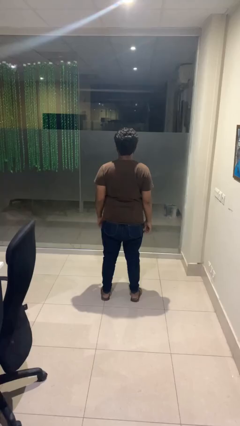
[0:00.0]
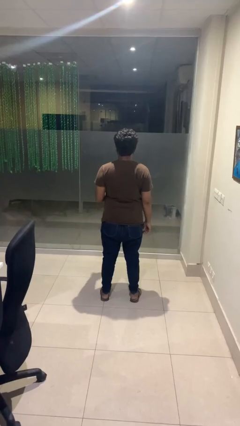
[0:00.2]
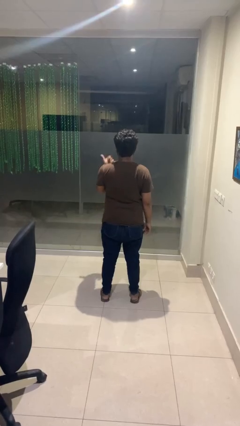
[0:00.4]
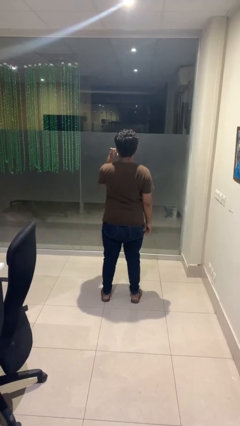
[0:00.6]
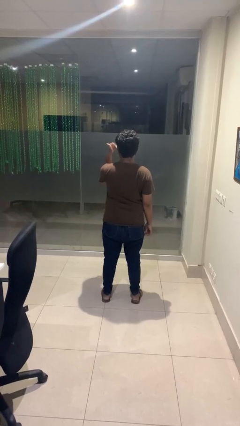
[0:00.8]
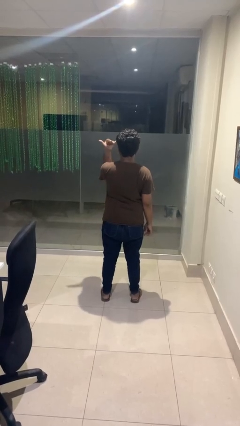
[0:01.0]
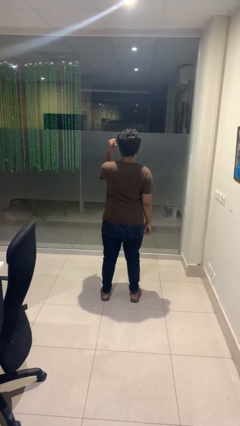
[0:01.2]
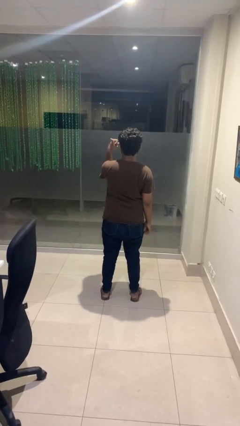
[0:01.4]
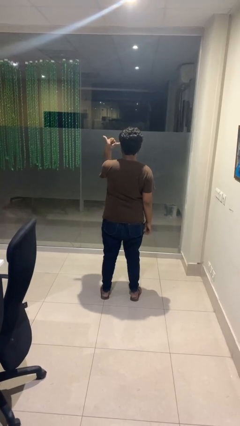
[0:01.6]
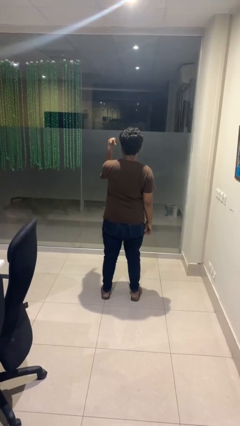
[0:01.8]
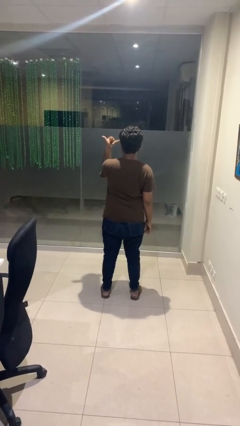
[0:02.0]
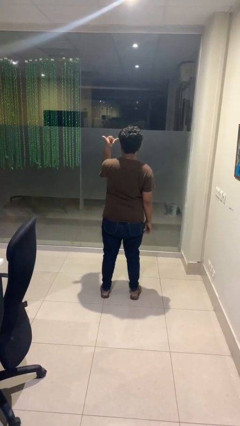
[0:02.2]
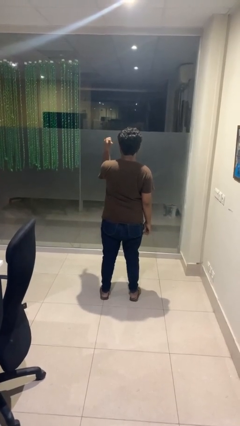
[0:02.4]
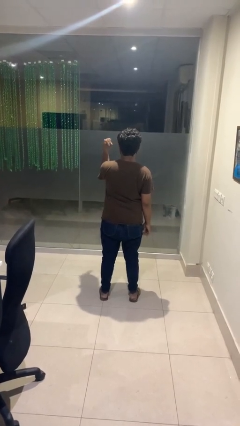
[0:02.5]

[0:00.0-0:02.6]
person gestures hang loose

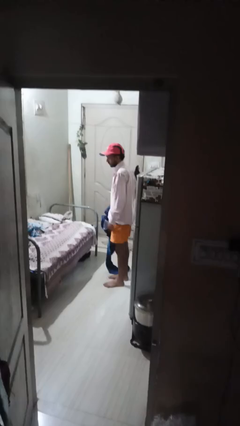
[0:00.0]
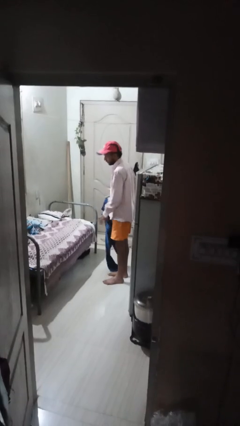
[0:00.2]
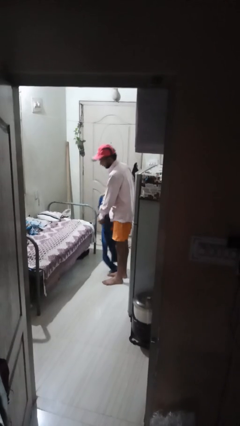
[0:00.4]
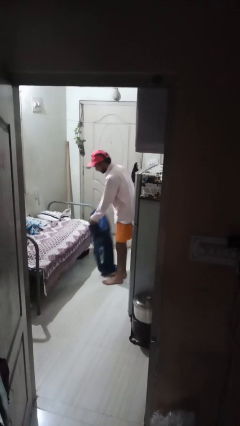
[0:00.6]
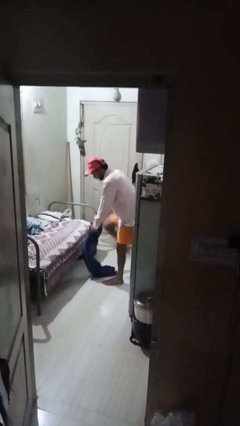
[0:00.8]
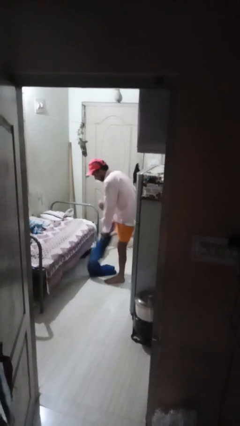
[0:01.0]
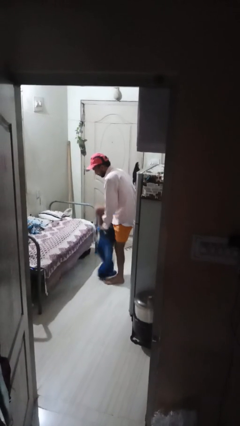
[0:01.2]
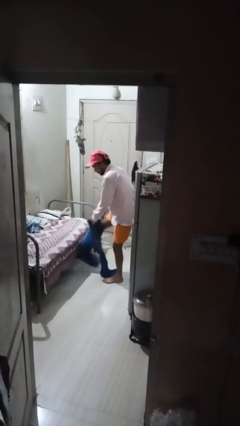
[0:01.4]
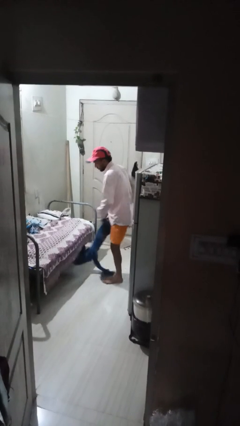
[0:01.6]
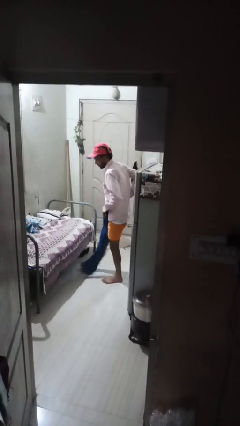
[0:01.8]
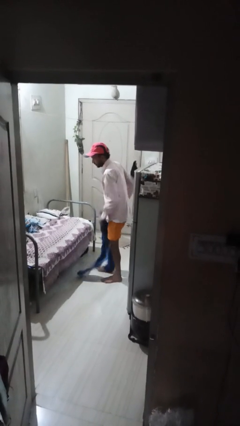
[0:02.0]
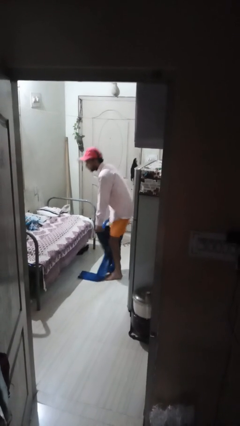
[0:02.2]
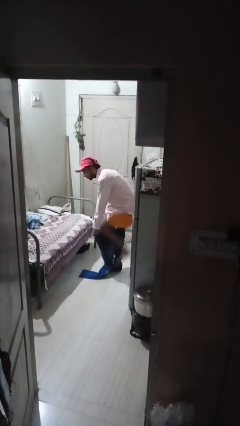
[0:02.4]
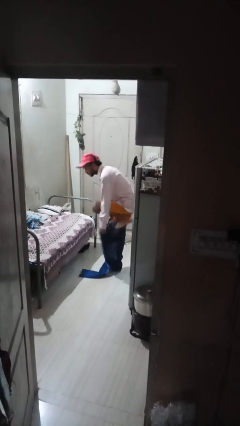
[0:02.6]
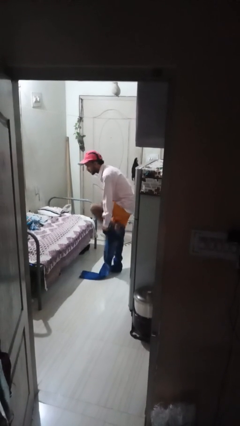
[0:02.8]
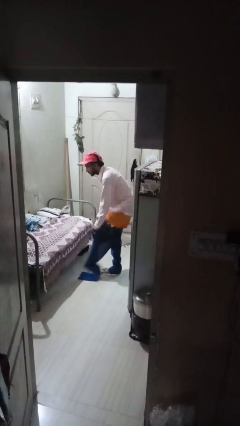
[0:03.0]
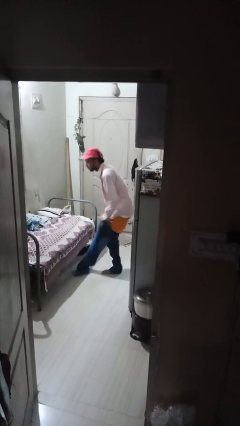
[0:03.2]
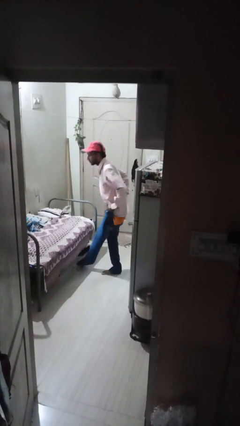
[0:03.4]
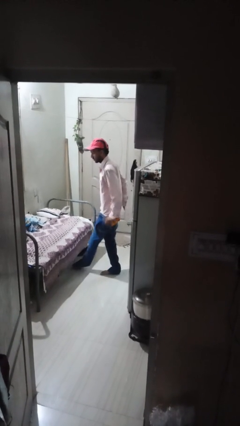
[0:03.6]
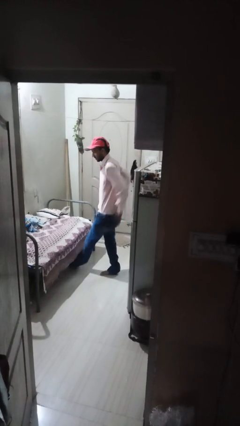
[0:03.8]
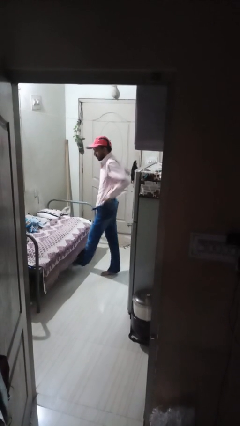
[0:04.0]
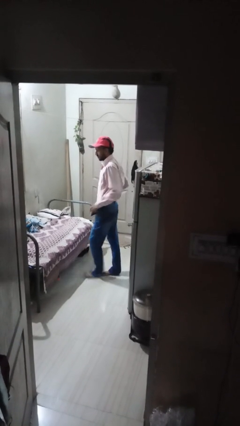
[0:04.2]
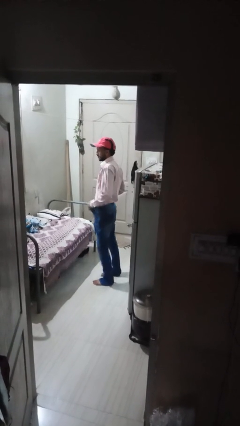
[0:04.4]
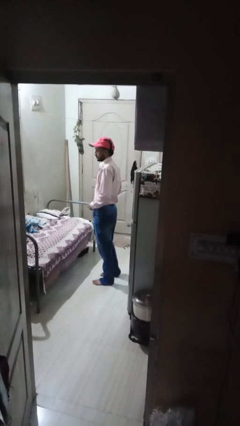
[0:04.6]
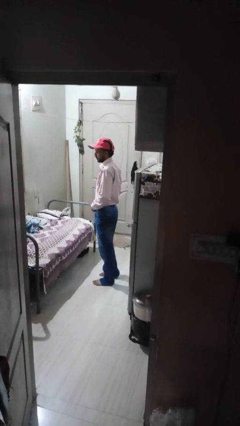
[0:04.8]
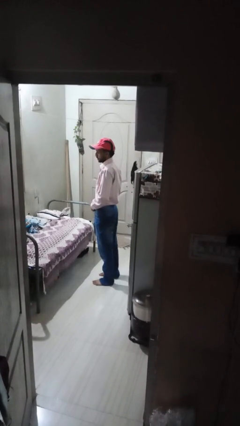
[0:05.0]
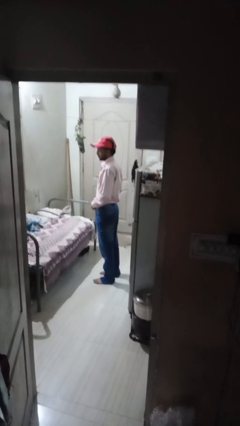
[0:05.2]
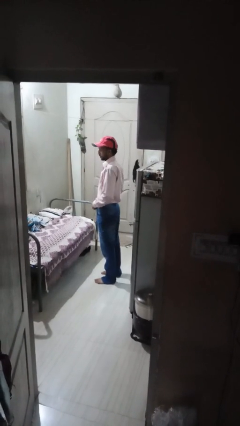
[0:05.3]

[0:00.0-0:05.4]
person puts on pants

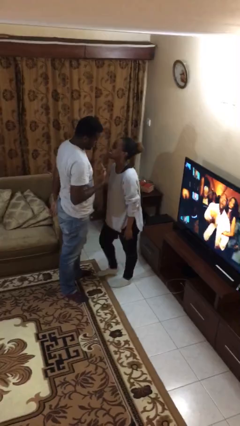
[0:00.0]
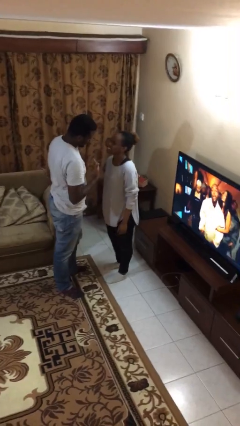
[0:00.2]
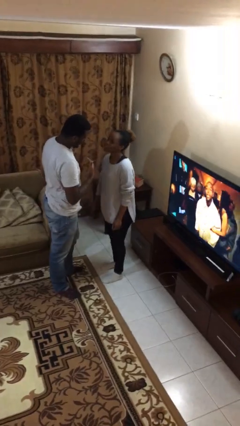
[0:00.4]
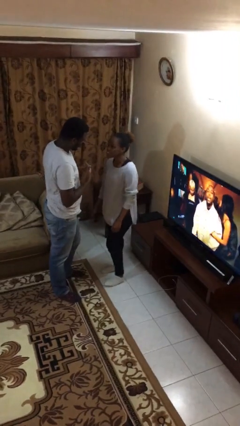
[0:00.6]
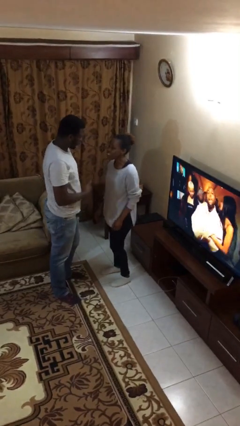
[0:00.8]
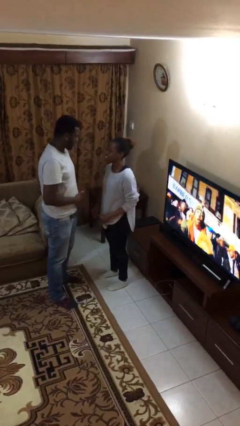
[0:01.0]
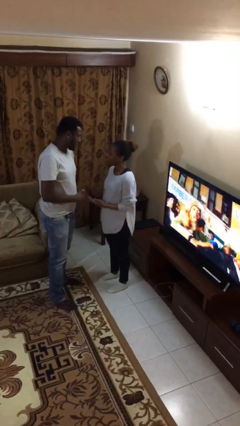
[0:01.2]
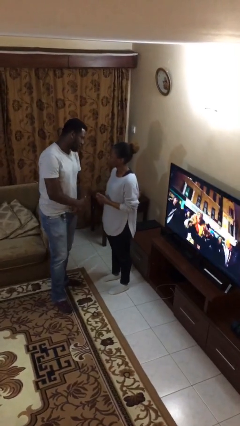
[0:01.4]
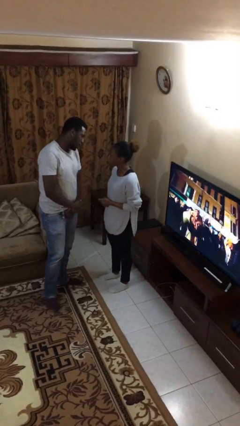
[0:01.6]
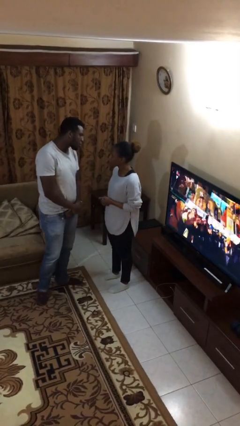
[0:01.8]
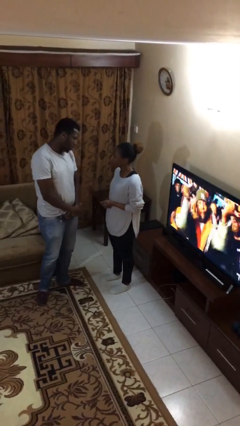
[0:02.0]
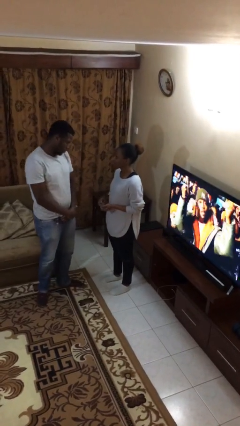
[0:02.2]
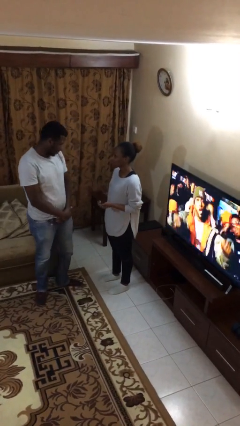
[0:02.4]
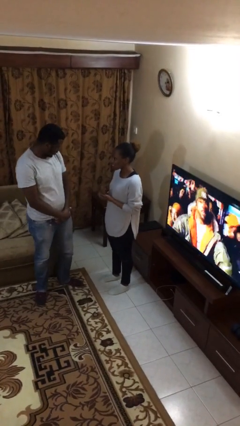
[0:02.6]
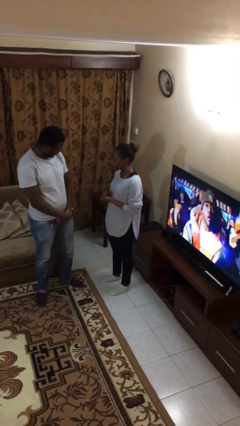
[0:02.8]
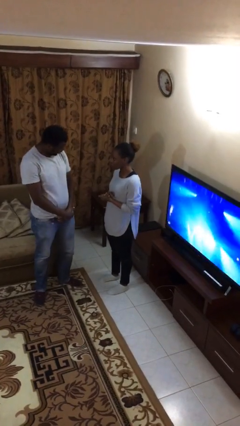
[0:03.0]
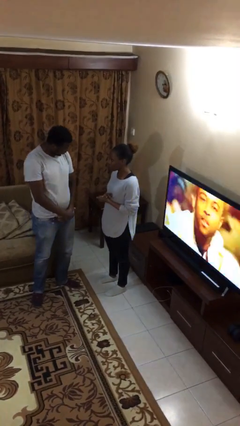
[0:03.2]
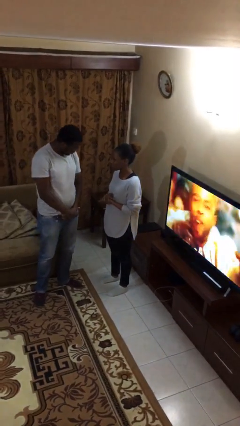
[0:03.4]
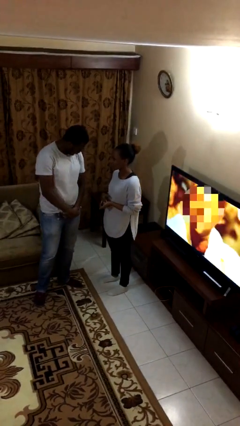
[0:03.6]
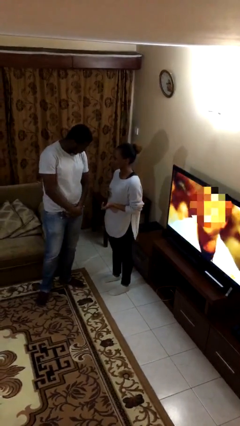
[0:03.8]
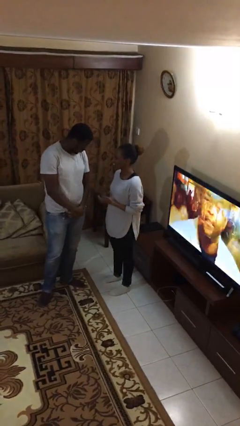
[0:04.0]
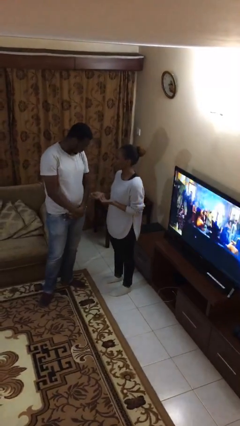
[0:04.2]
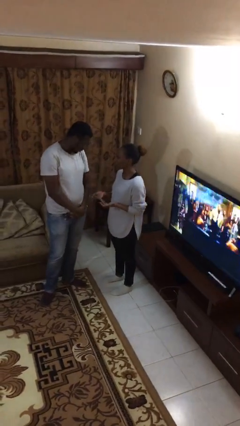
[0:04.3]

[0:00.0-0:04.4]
person talks to person

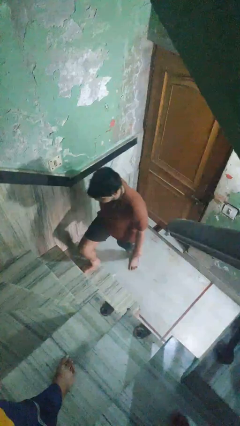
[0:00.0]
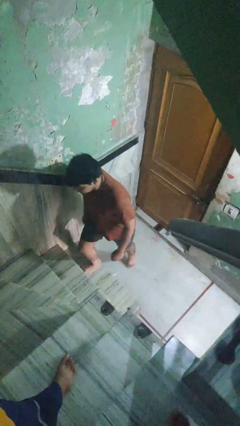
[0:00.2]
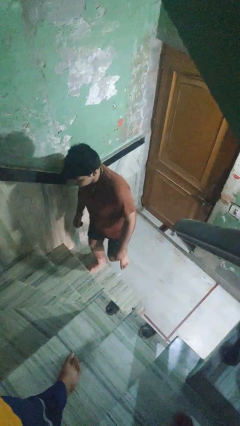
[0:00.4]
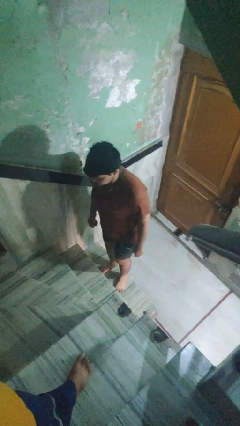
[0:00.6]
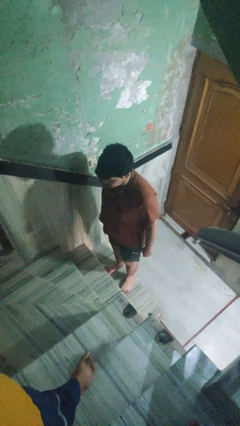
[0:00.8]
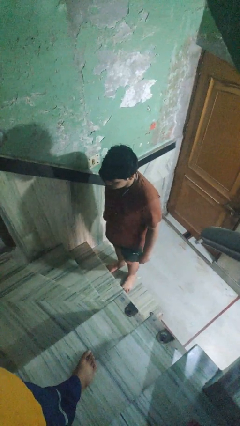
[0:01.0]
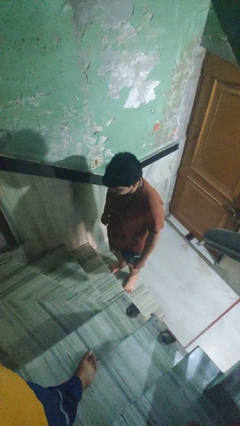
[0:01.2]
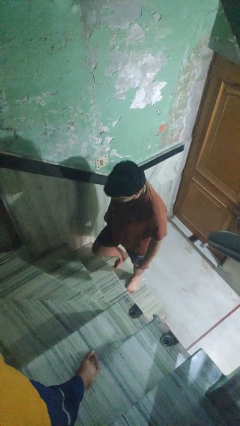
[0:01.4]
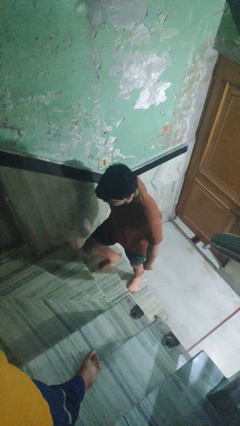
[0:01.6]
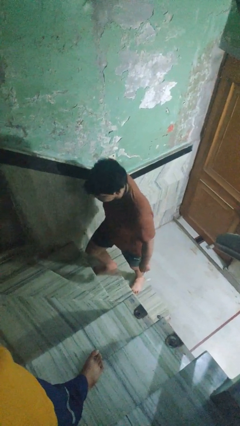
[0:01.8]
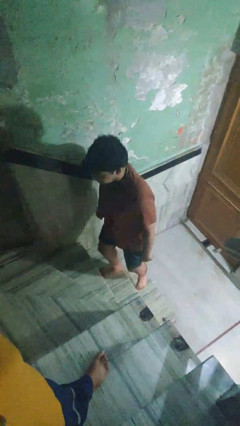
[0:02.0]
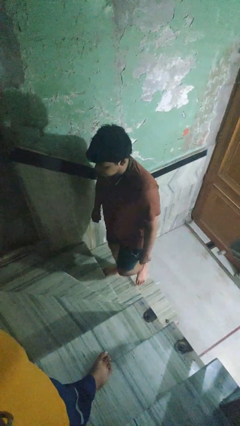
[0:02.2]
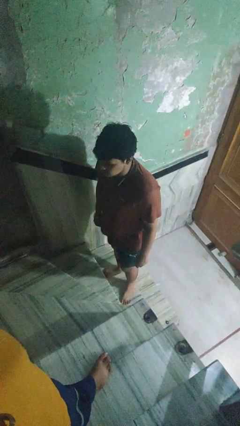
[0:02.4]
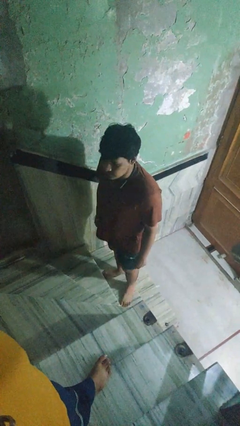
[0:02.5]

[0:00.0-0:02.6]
person climbs up stairs

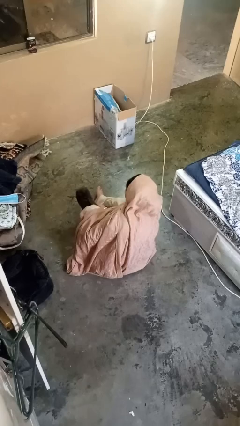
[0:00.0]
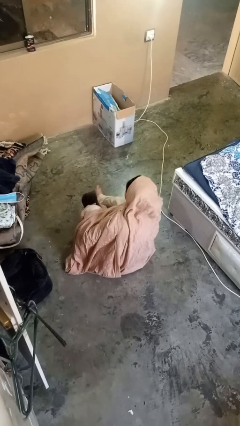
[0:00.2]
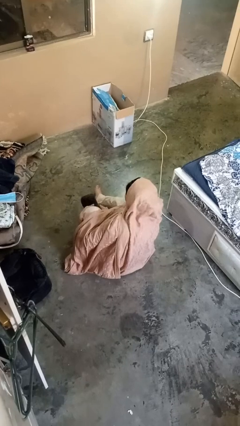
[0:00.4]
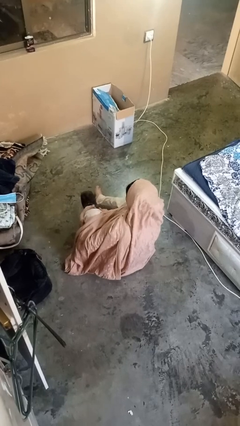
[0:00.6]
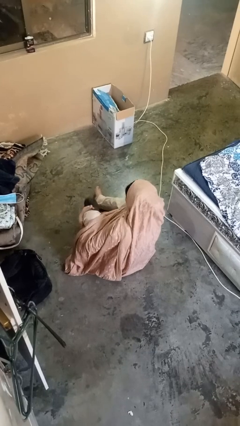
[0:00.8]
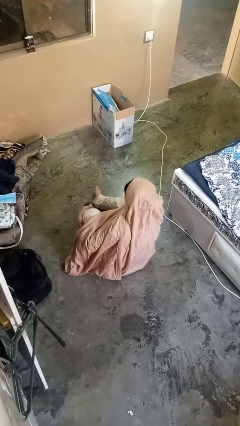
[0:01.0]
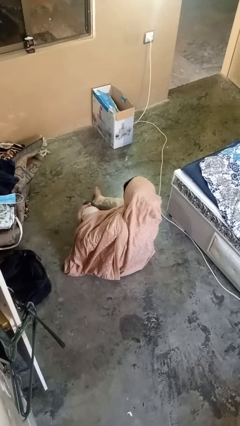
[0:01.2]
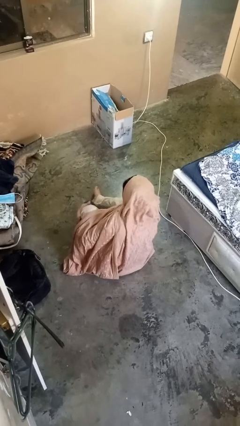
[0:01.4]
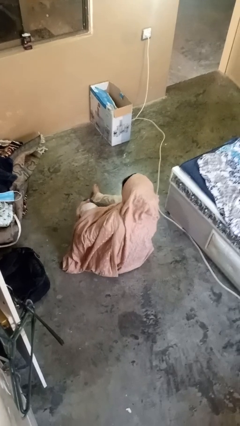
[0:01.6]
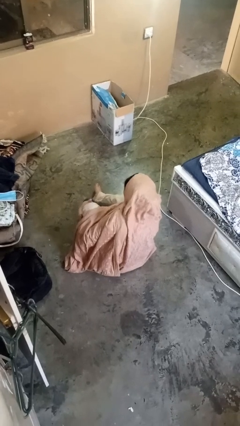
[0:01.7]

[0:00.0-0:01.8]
person puts on shoes

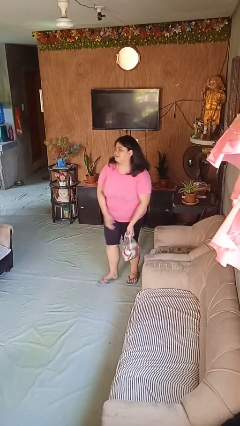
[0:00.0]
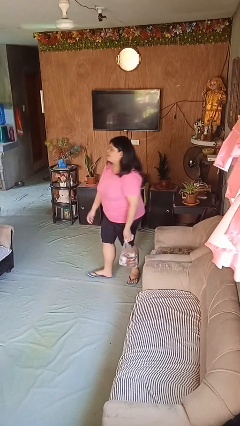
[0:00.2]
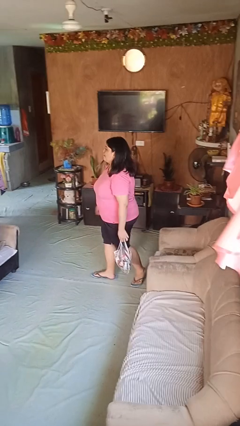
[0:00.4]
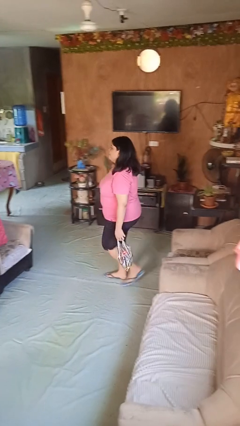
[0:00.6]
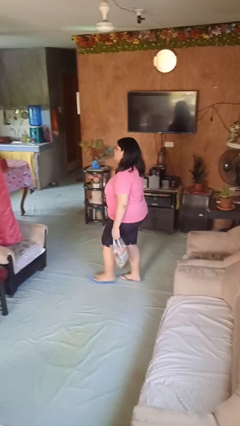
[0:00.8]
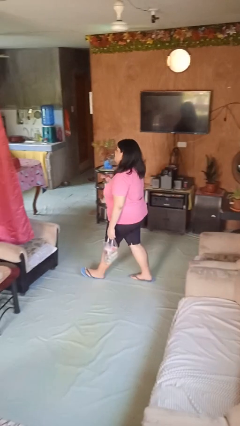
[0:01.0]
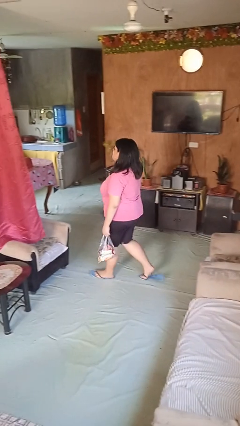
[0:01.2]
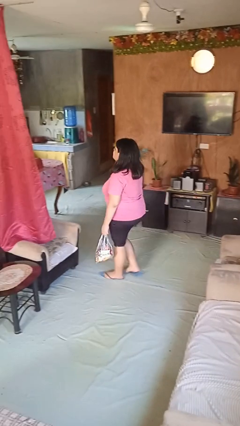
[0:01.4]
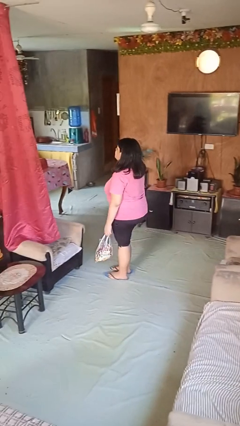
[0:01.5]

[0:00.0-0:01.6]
person carries groceries
